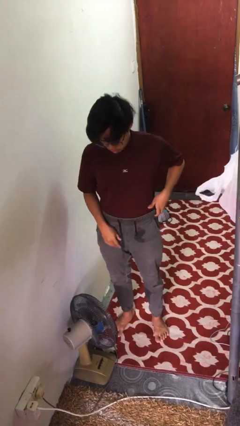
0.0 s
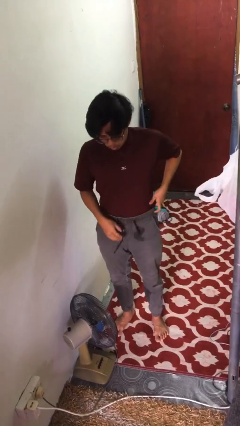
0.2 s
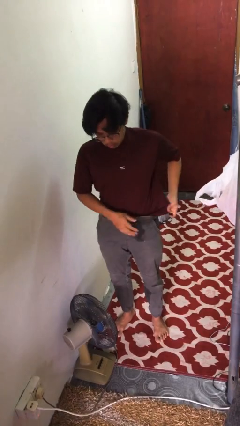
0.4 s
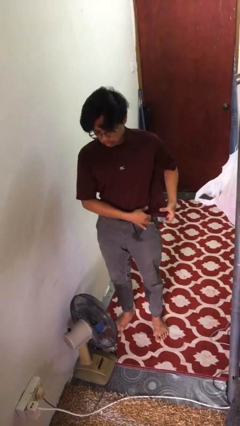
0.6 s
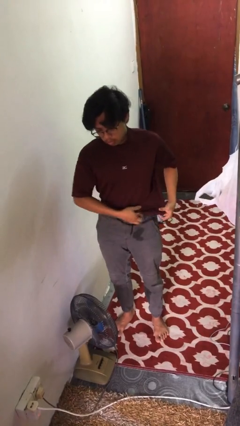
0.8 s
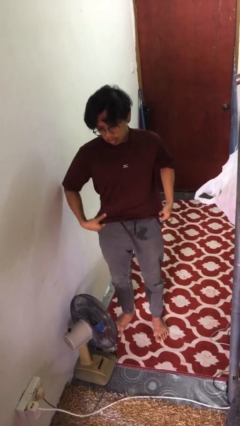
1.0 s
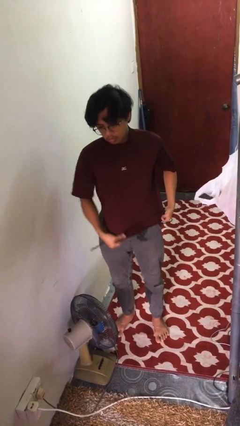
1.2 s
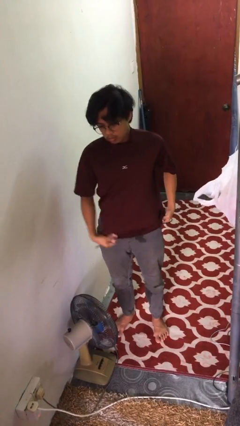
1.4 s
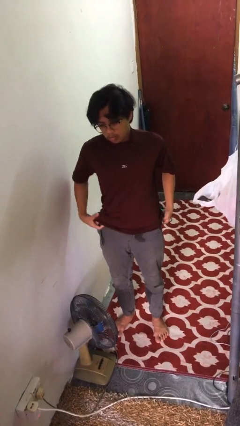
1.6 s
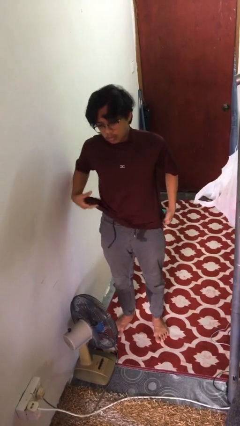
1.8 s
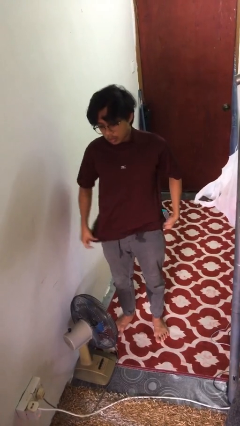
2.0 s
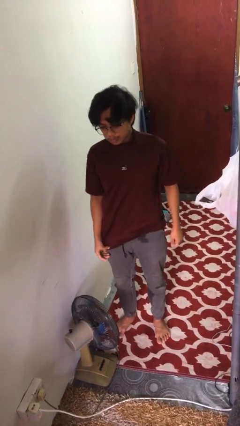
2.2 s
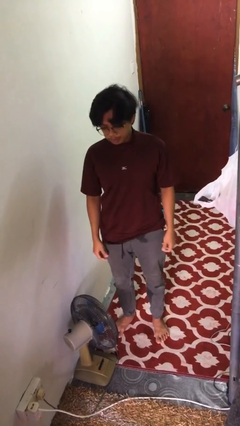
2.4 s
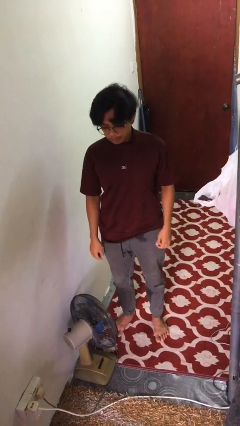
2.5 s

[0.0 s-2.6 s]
person untucks shirt

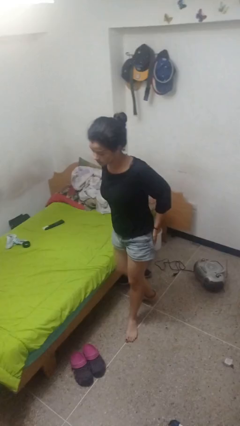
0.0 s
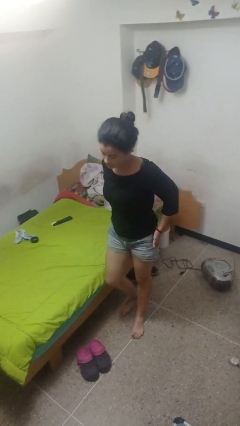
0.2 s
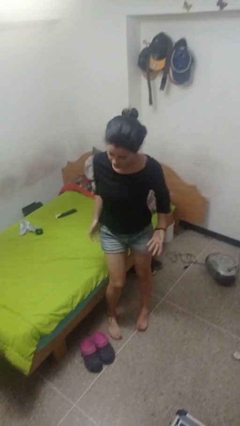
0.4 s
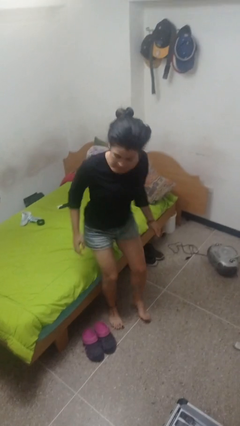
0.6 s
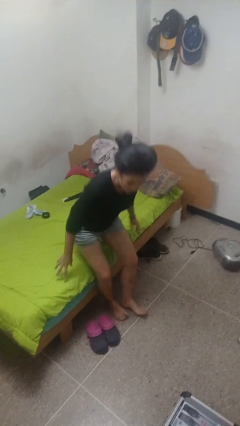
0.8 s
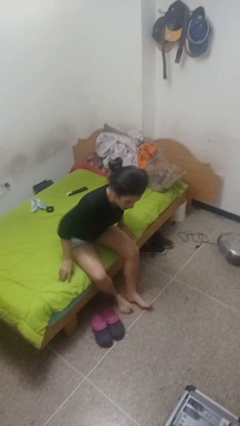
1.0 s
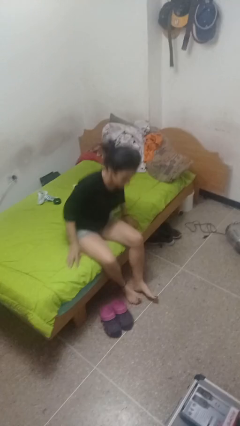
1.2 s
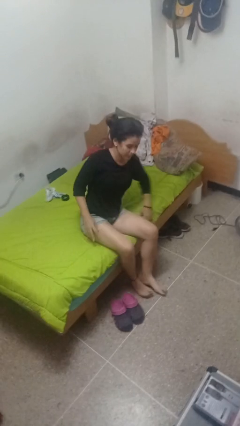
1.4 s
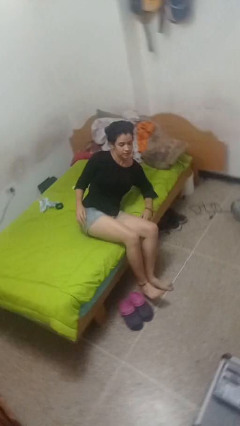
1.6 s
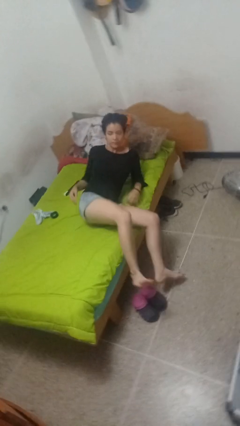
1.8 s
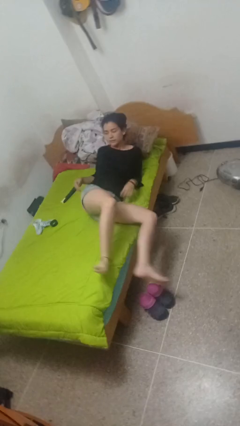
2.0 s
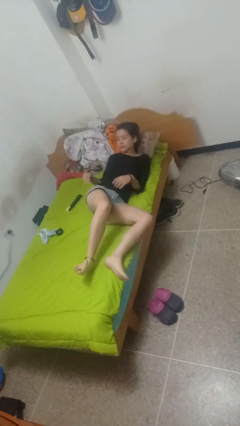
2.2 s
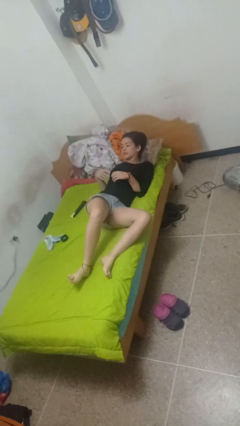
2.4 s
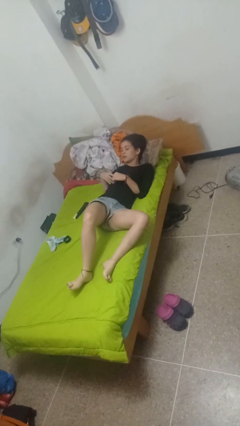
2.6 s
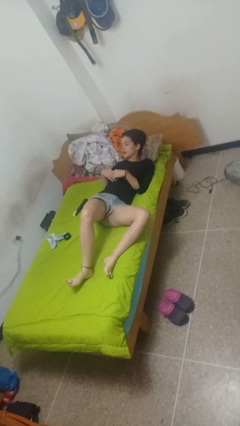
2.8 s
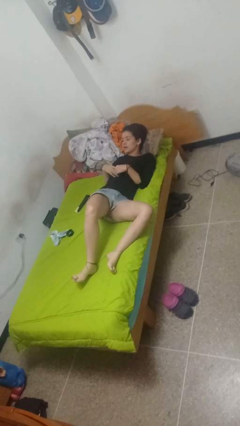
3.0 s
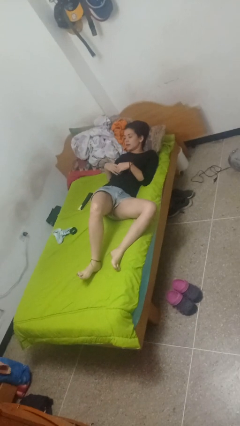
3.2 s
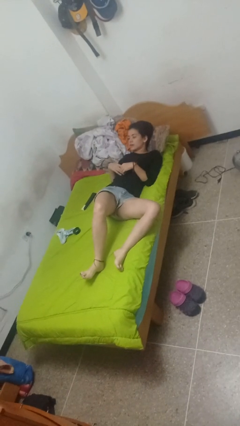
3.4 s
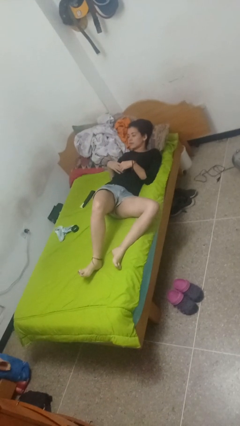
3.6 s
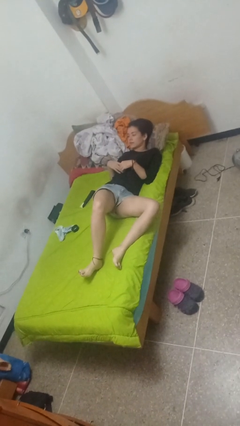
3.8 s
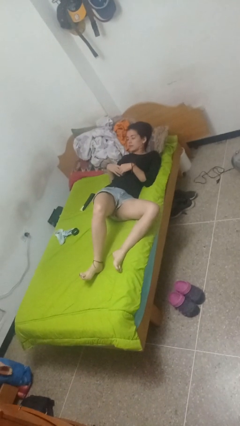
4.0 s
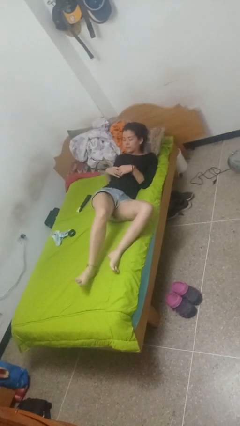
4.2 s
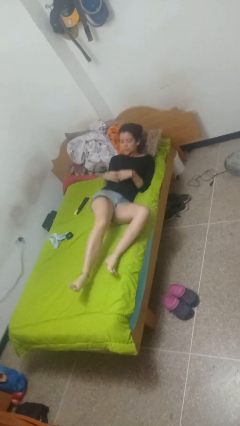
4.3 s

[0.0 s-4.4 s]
person lies down on bed

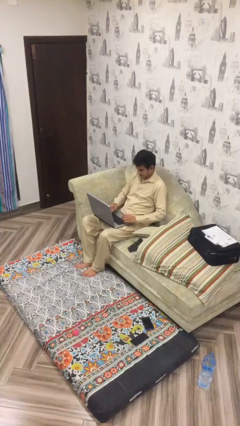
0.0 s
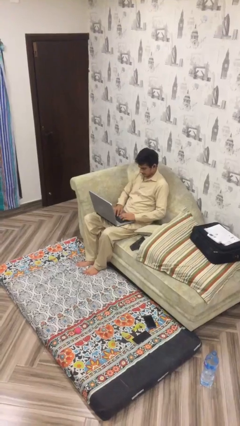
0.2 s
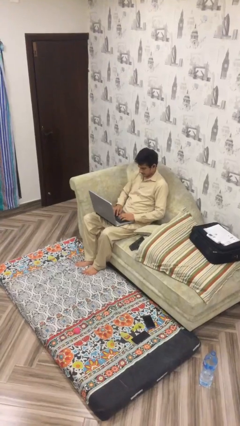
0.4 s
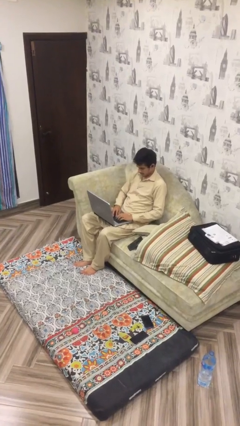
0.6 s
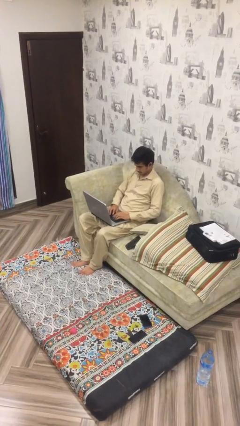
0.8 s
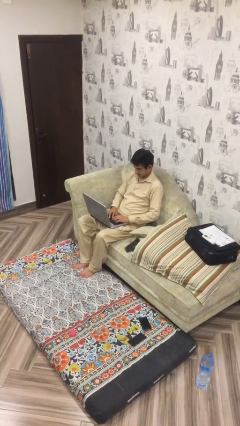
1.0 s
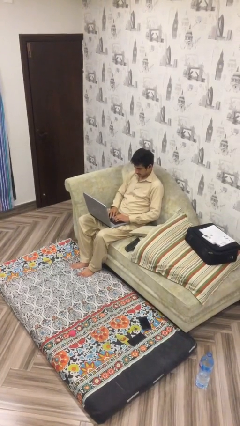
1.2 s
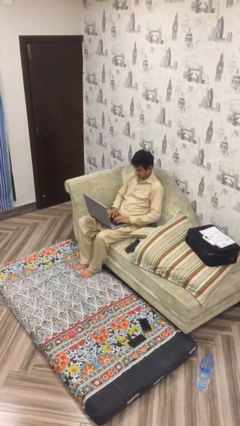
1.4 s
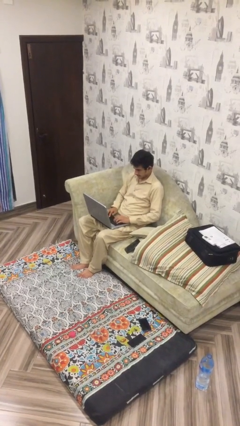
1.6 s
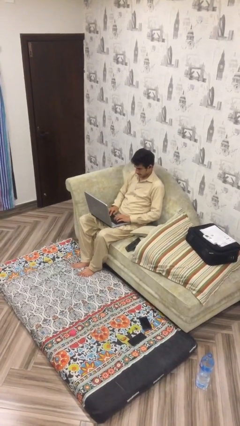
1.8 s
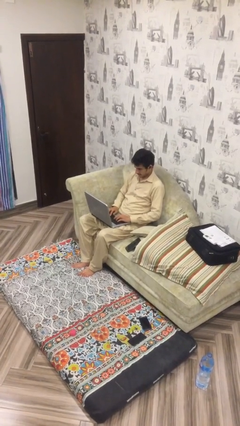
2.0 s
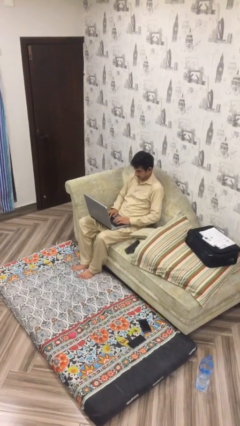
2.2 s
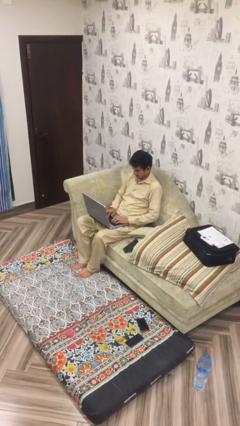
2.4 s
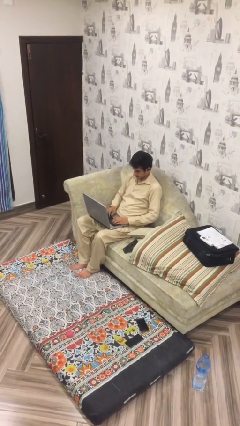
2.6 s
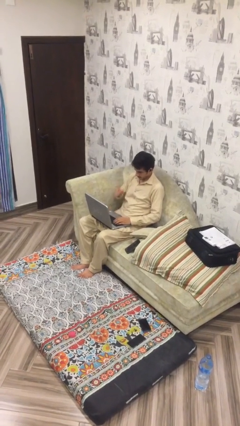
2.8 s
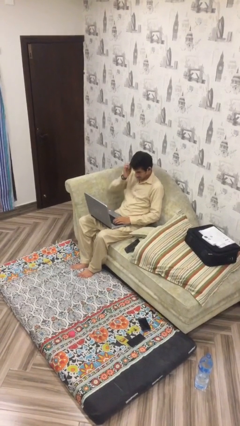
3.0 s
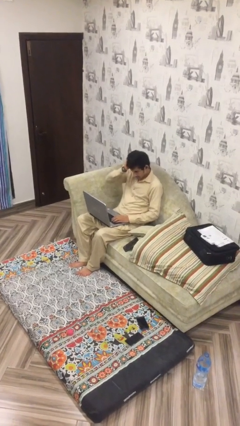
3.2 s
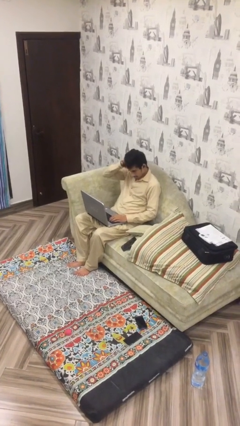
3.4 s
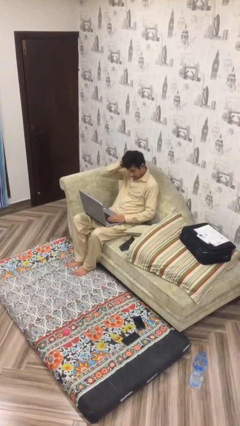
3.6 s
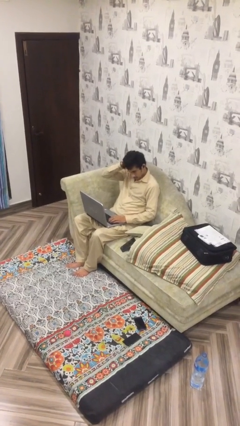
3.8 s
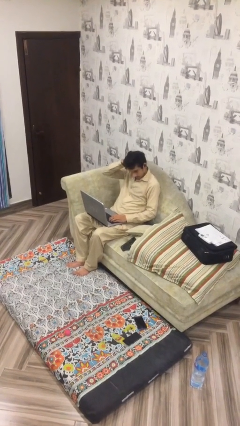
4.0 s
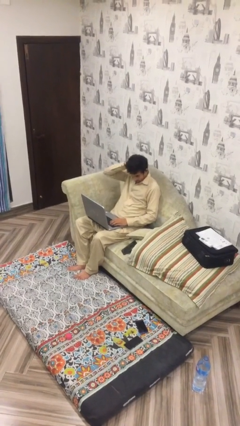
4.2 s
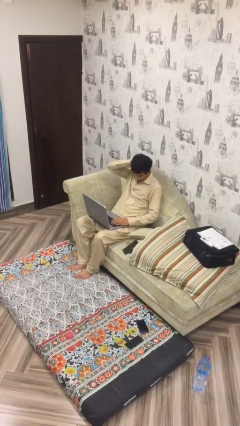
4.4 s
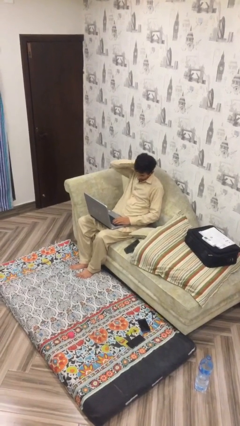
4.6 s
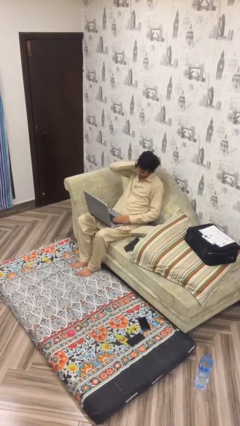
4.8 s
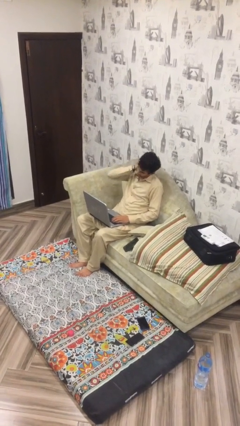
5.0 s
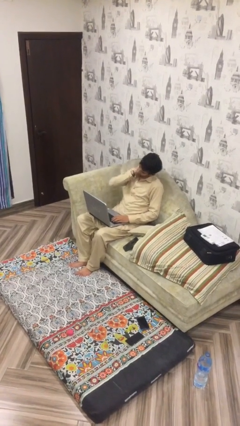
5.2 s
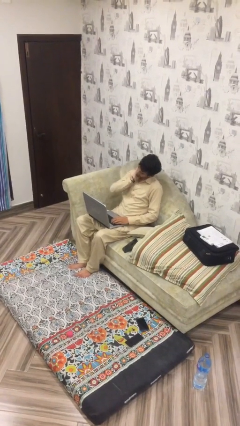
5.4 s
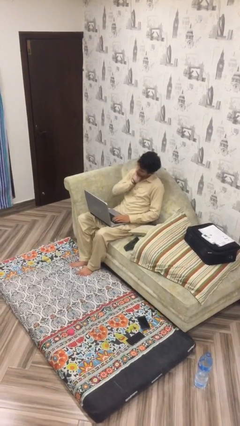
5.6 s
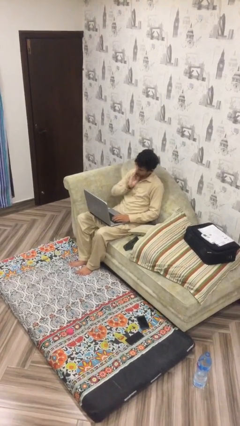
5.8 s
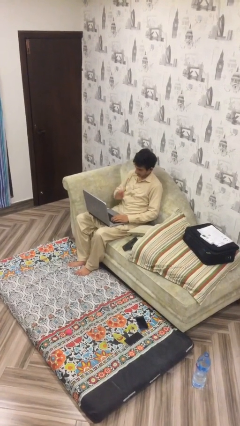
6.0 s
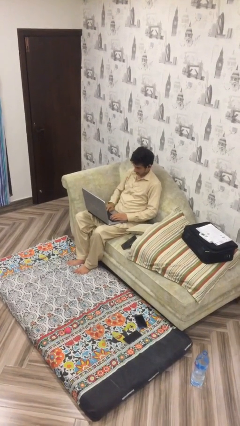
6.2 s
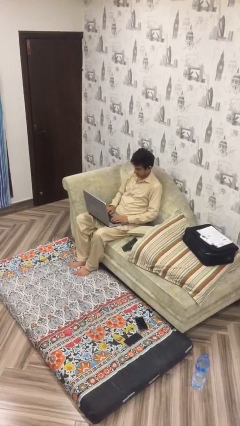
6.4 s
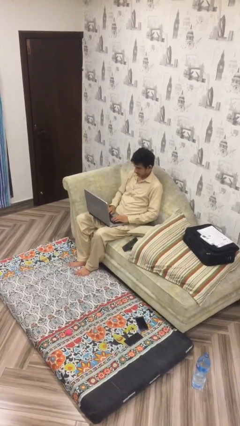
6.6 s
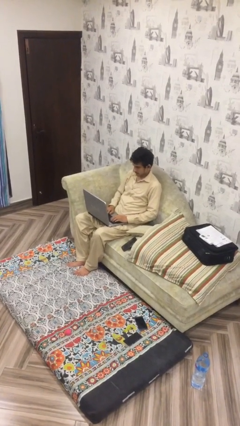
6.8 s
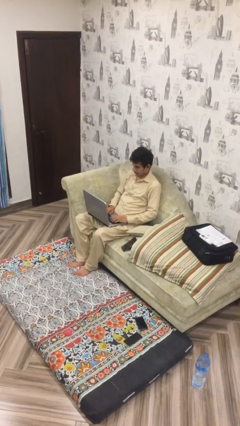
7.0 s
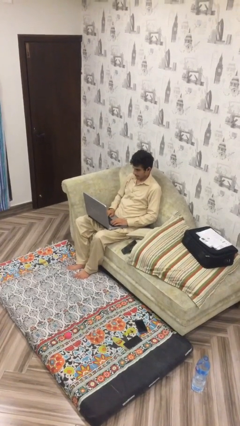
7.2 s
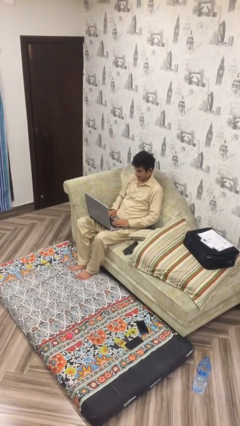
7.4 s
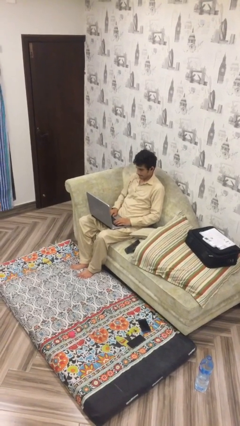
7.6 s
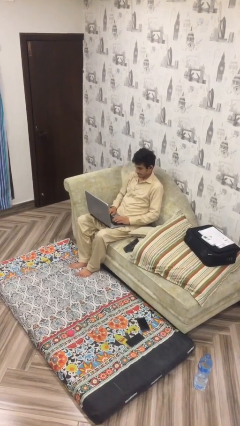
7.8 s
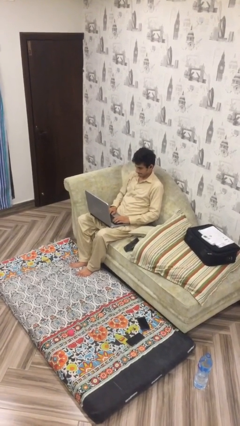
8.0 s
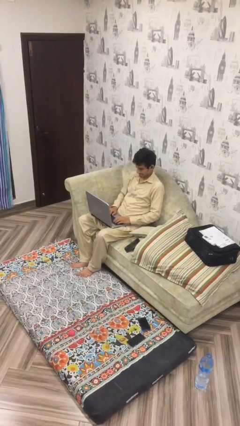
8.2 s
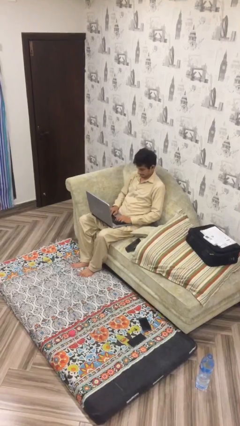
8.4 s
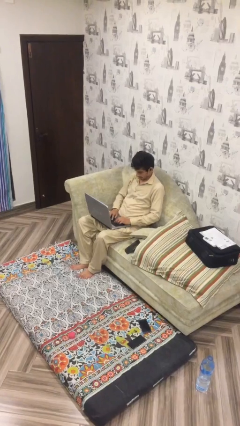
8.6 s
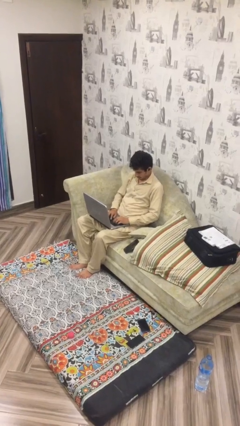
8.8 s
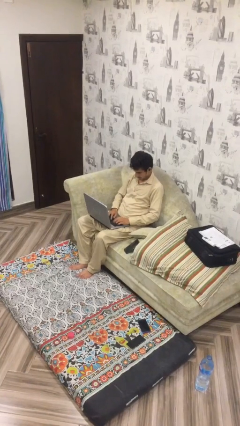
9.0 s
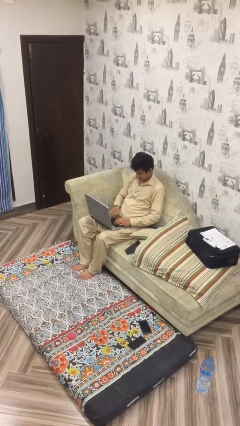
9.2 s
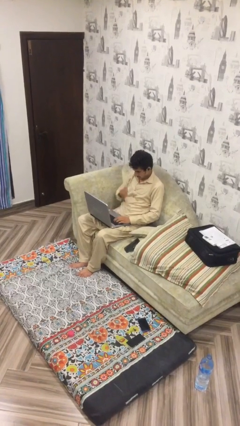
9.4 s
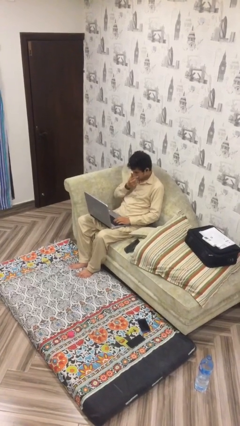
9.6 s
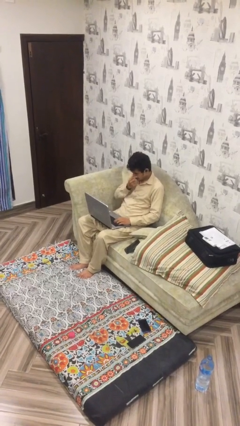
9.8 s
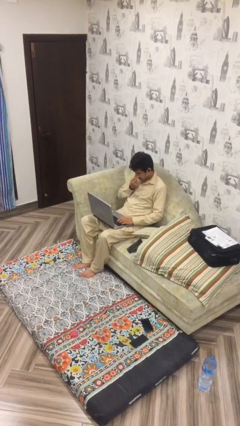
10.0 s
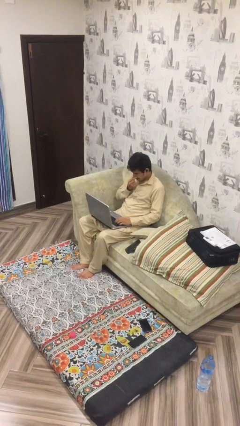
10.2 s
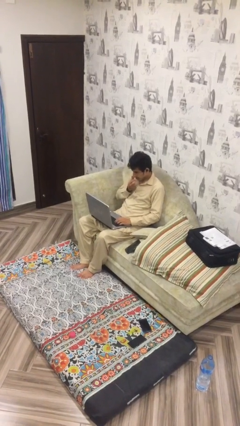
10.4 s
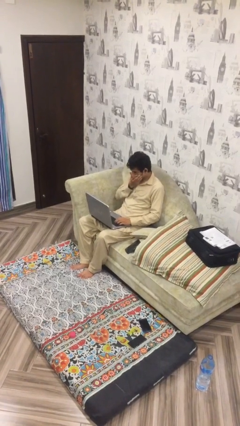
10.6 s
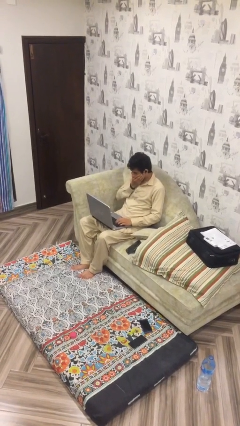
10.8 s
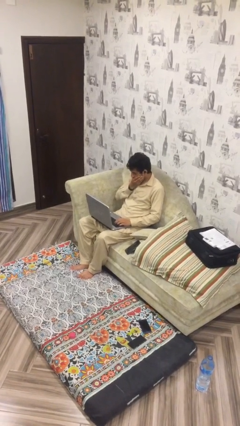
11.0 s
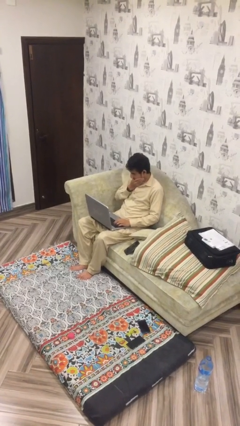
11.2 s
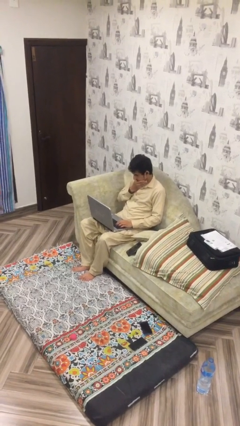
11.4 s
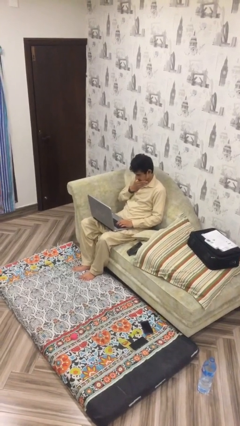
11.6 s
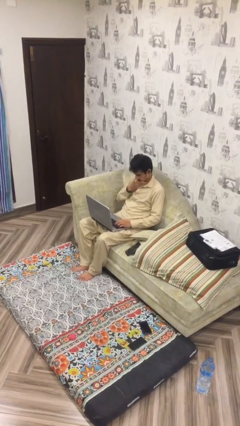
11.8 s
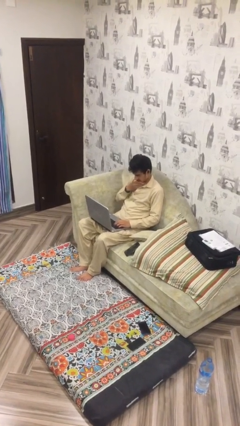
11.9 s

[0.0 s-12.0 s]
person interacts with laptop
